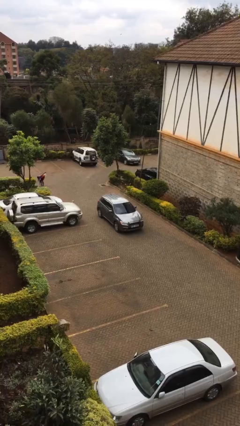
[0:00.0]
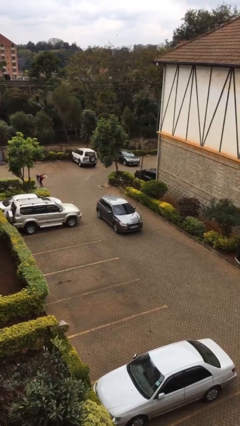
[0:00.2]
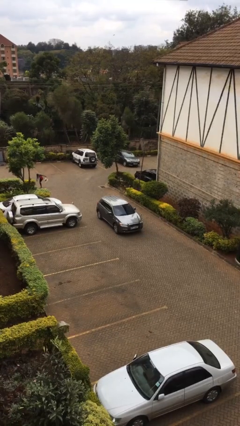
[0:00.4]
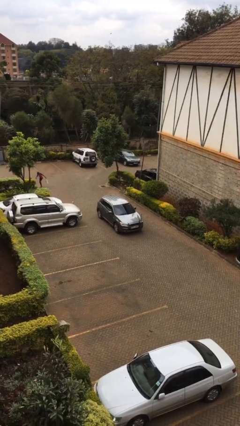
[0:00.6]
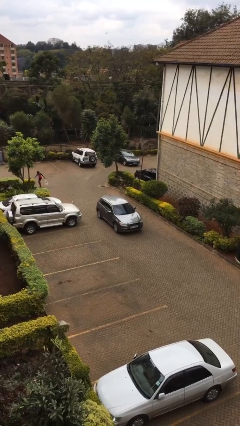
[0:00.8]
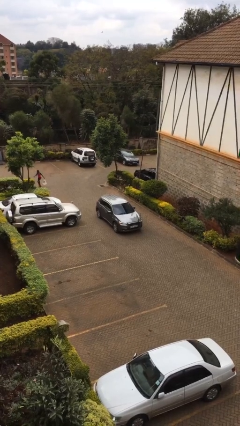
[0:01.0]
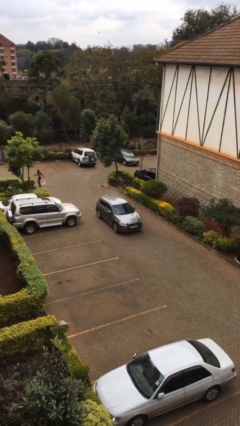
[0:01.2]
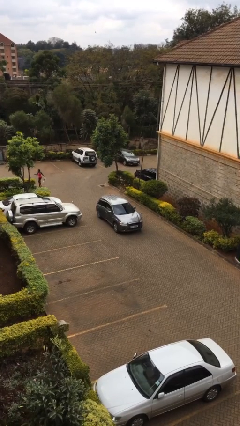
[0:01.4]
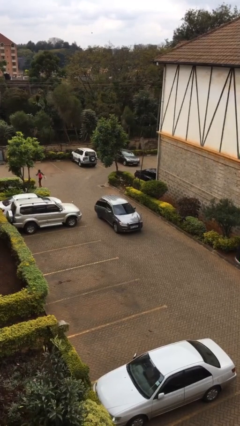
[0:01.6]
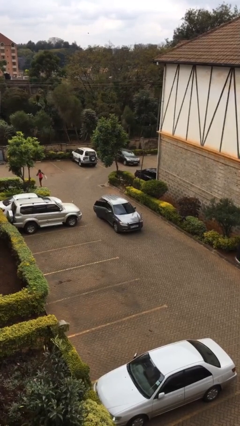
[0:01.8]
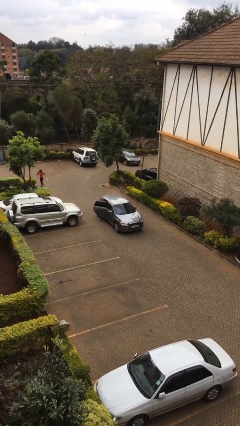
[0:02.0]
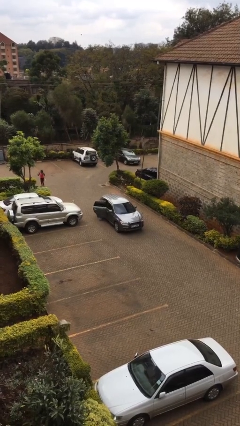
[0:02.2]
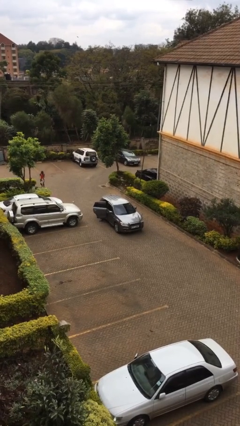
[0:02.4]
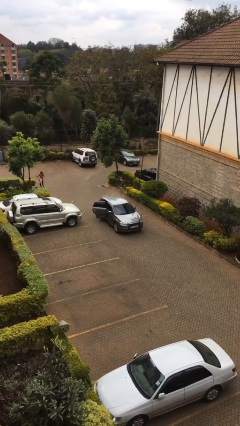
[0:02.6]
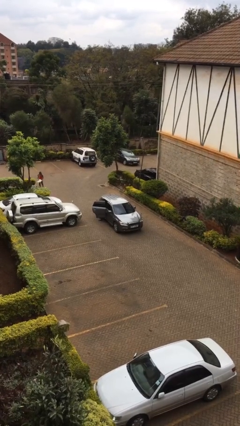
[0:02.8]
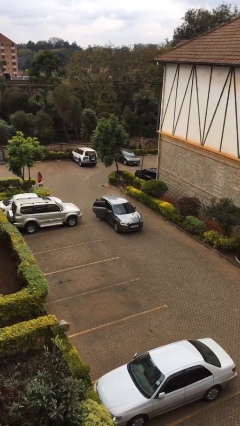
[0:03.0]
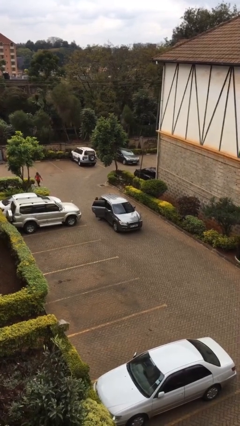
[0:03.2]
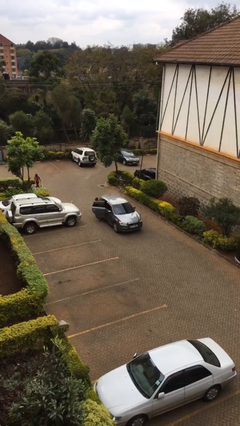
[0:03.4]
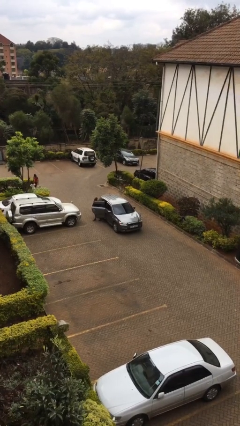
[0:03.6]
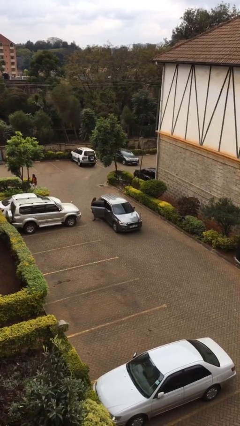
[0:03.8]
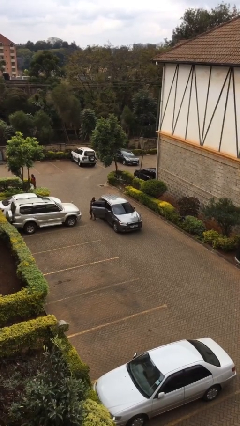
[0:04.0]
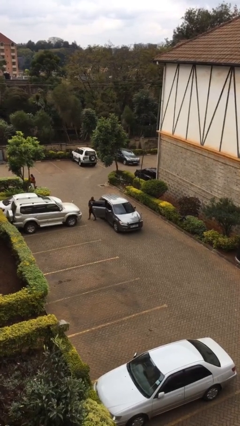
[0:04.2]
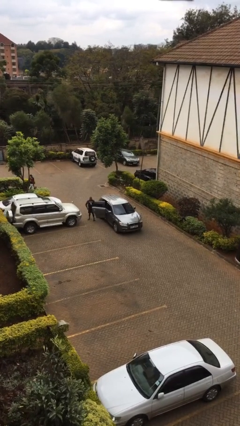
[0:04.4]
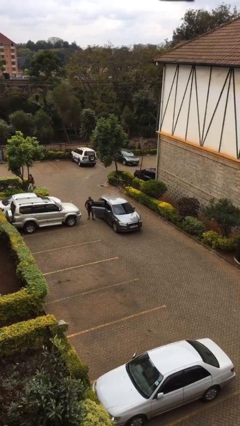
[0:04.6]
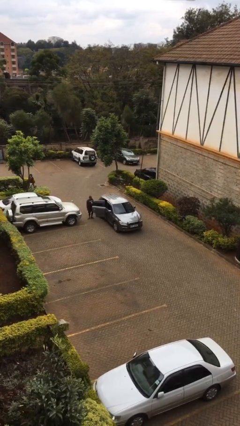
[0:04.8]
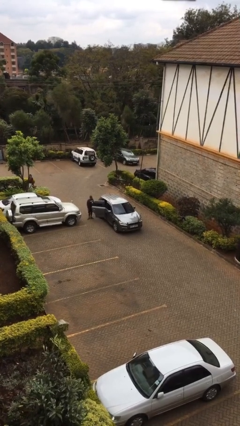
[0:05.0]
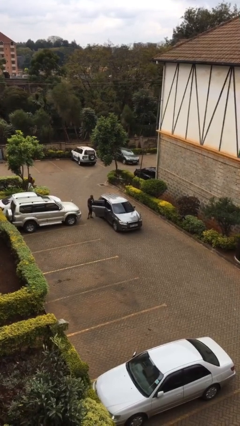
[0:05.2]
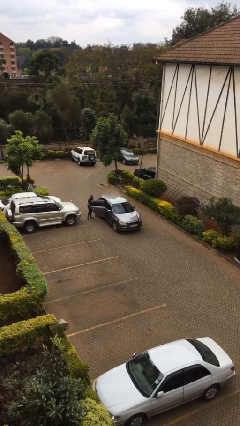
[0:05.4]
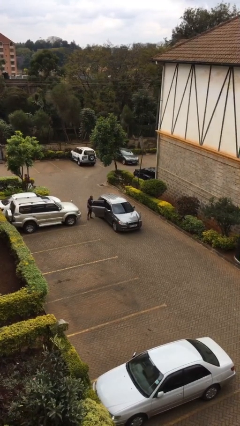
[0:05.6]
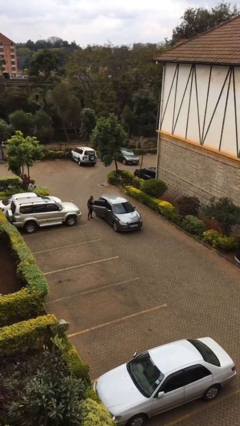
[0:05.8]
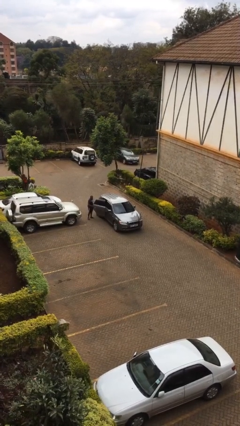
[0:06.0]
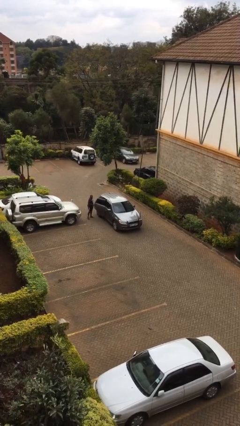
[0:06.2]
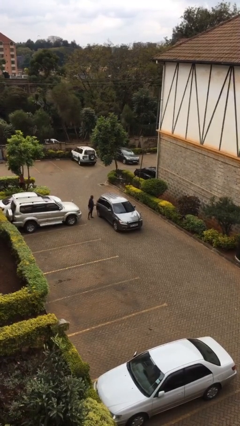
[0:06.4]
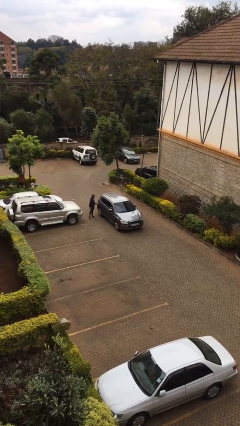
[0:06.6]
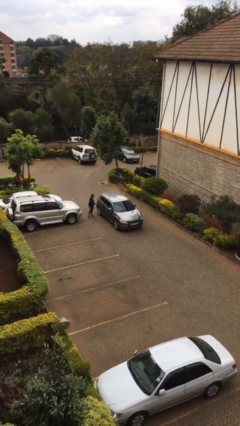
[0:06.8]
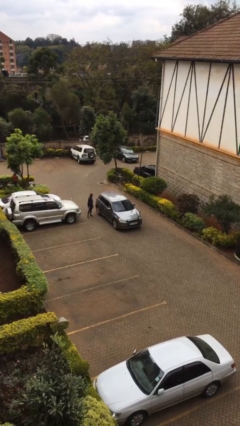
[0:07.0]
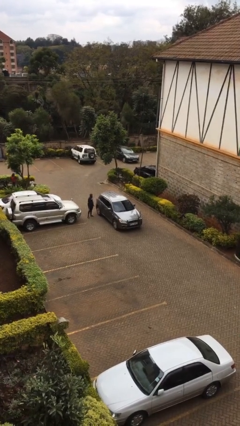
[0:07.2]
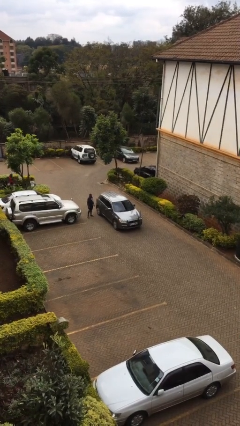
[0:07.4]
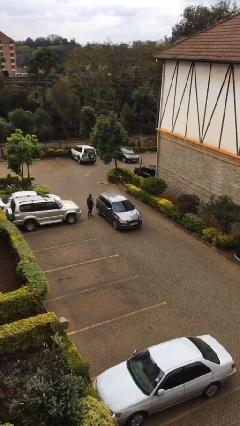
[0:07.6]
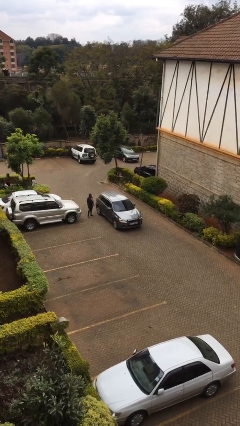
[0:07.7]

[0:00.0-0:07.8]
car drops off person

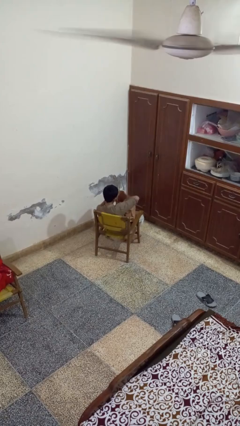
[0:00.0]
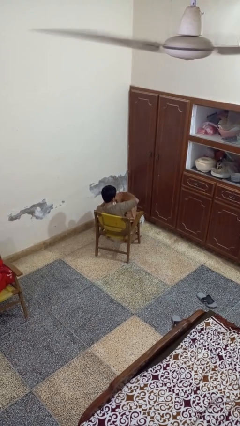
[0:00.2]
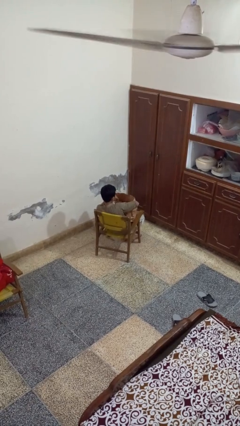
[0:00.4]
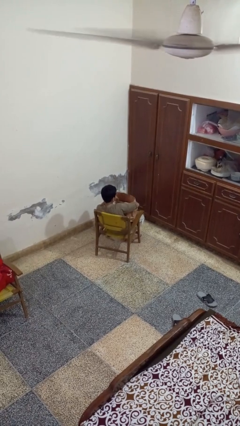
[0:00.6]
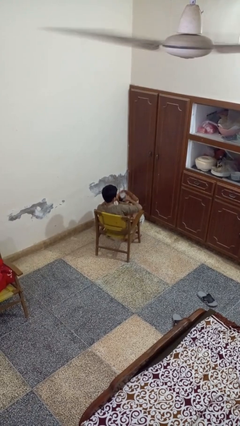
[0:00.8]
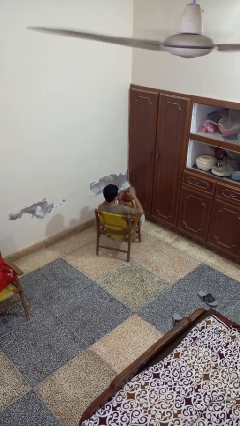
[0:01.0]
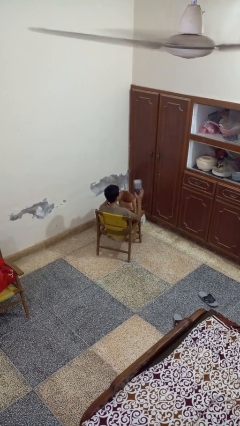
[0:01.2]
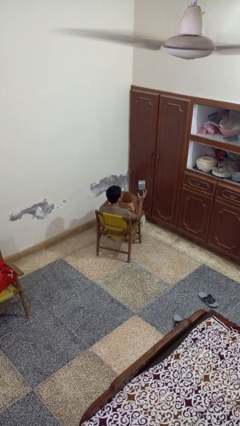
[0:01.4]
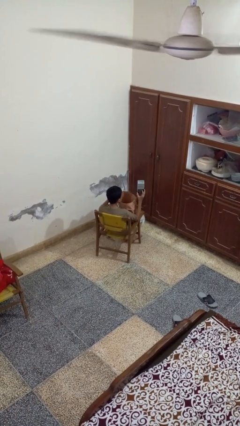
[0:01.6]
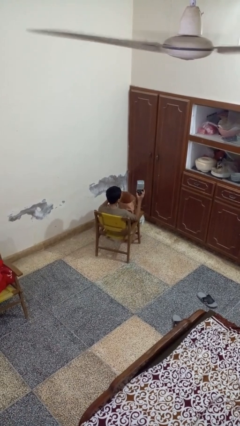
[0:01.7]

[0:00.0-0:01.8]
person takes object from bag

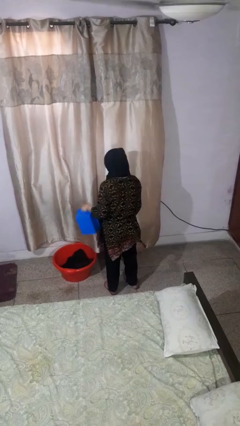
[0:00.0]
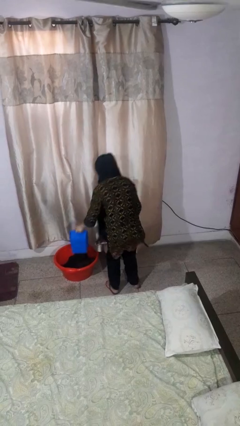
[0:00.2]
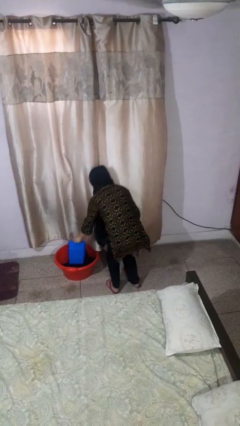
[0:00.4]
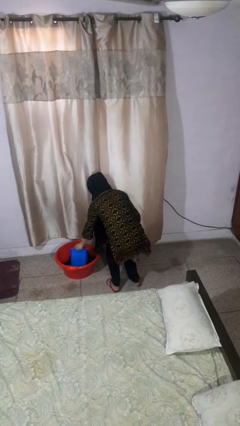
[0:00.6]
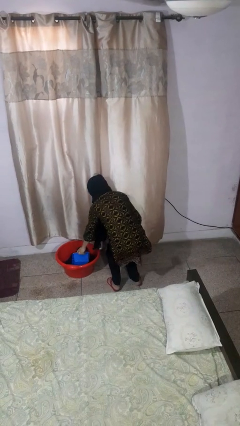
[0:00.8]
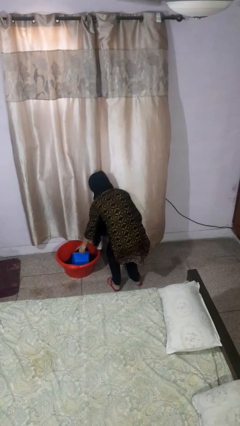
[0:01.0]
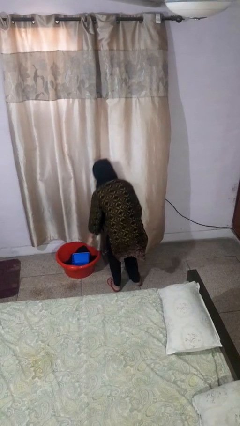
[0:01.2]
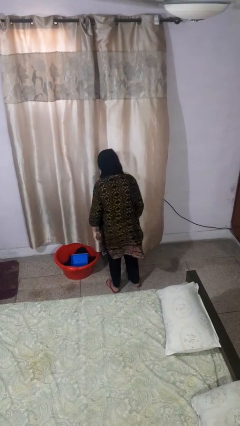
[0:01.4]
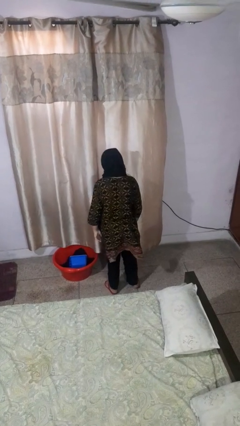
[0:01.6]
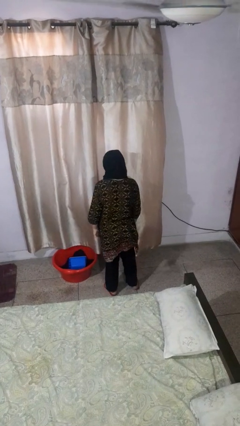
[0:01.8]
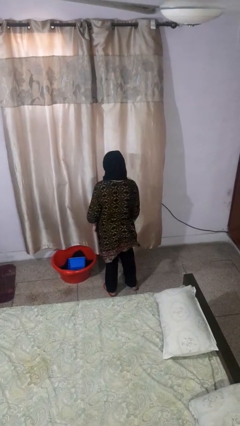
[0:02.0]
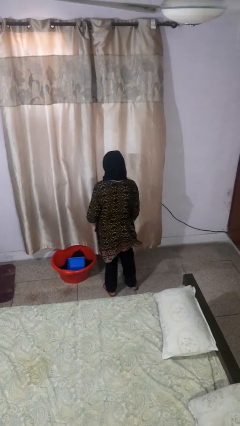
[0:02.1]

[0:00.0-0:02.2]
person puts object into basket

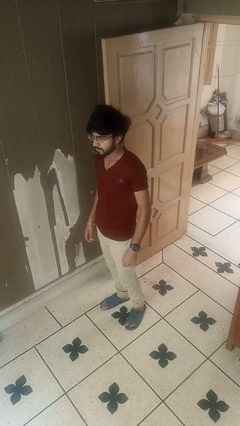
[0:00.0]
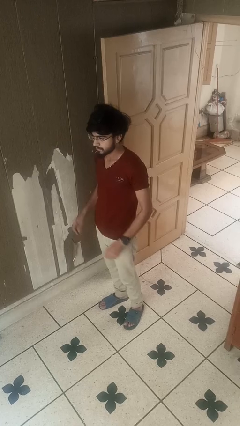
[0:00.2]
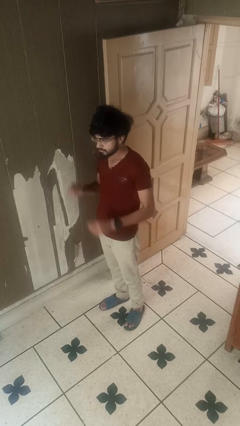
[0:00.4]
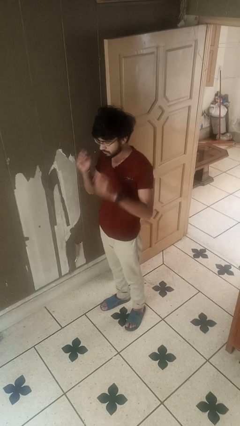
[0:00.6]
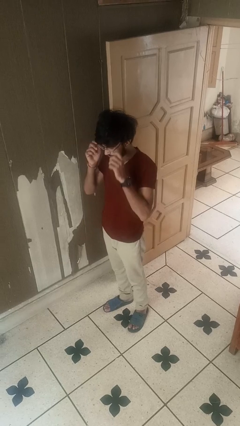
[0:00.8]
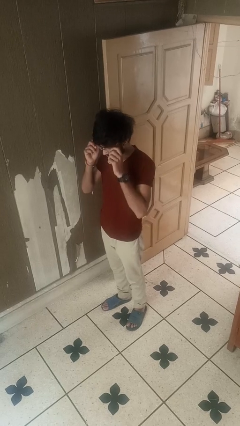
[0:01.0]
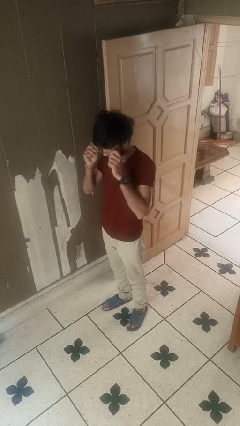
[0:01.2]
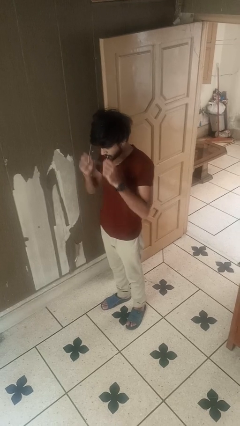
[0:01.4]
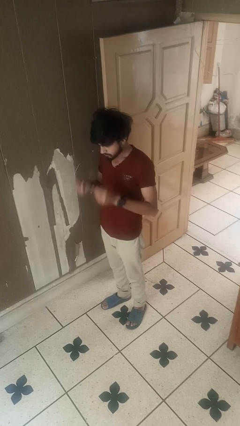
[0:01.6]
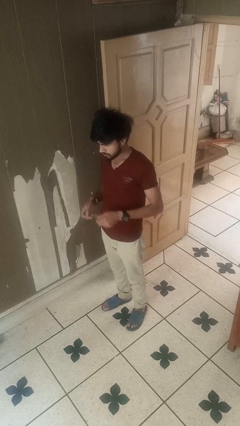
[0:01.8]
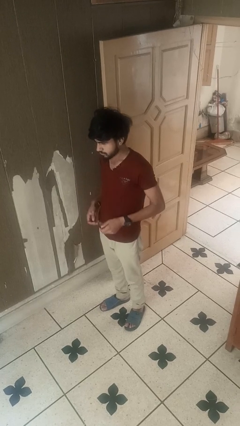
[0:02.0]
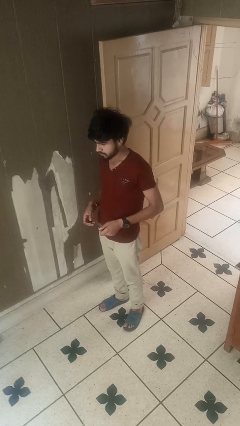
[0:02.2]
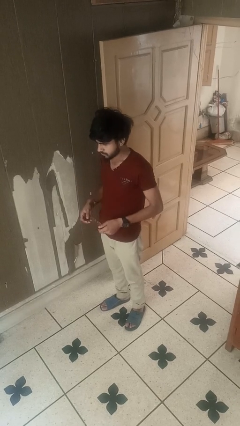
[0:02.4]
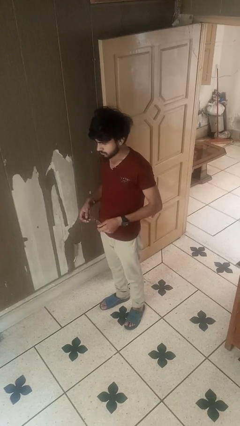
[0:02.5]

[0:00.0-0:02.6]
person takes off glasses

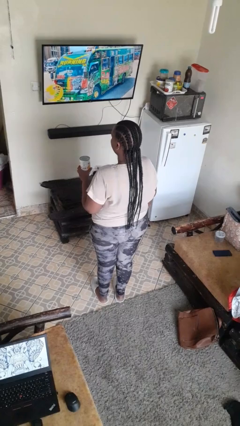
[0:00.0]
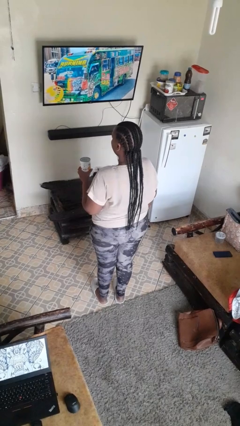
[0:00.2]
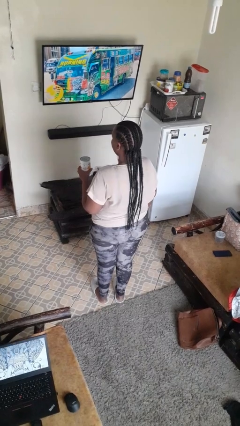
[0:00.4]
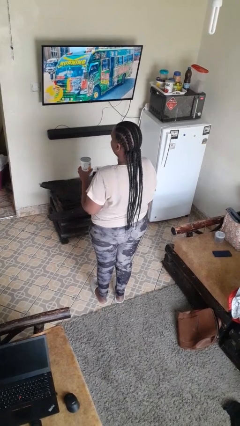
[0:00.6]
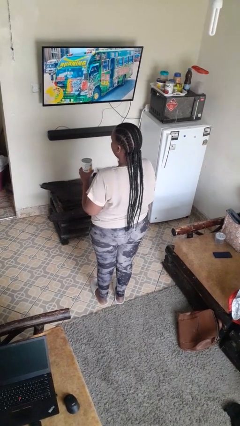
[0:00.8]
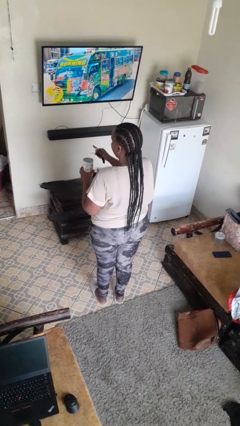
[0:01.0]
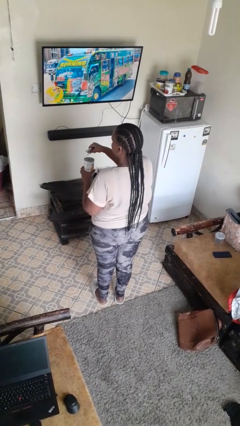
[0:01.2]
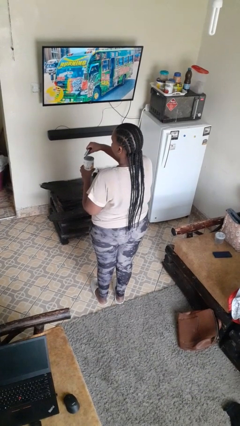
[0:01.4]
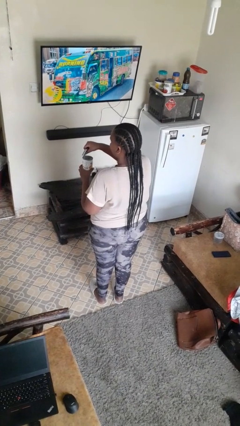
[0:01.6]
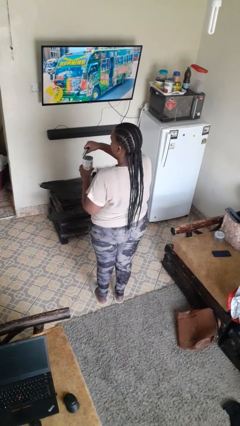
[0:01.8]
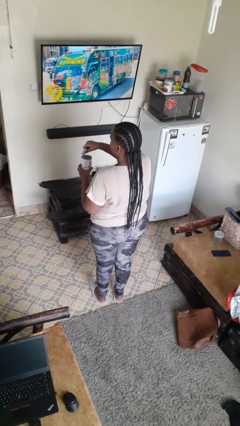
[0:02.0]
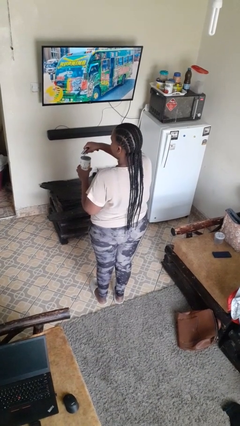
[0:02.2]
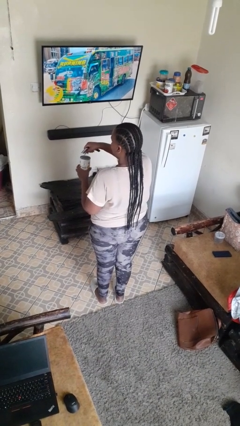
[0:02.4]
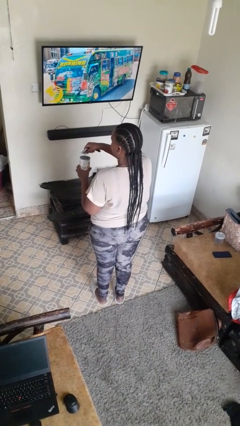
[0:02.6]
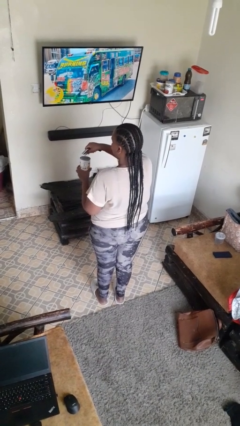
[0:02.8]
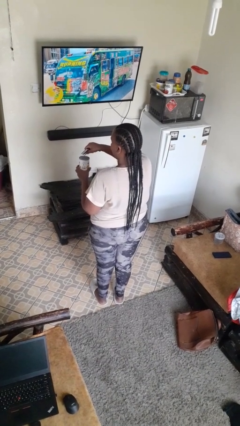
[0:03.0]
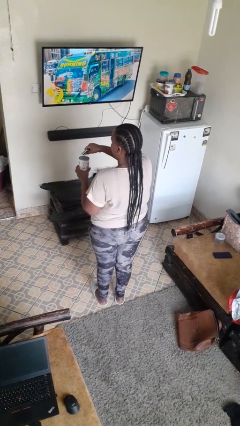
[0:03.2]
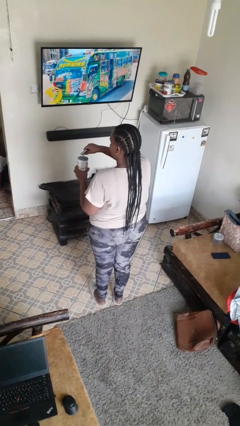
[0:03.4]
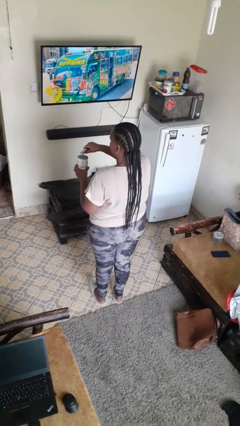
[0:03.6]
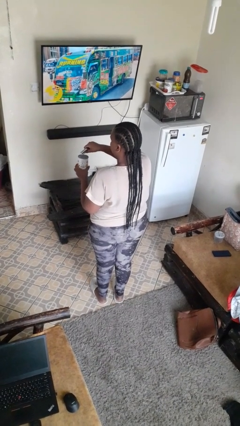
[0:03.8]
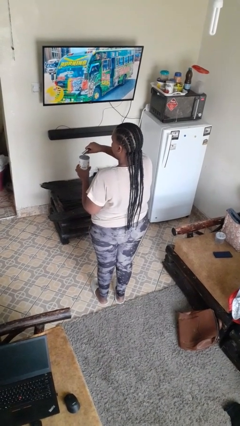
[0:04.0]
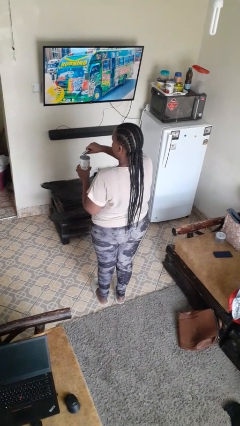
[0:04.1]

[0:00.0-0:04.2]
person opens can with can opener
